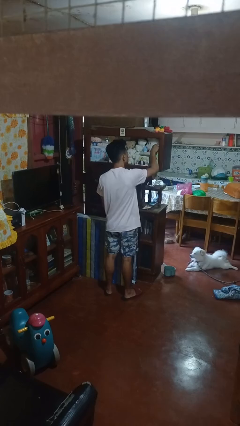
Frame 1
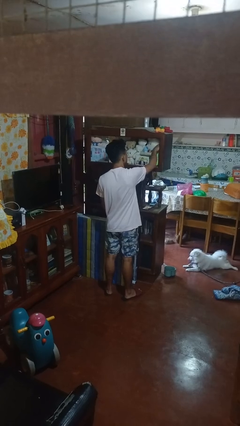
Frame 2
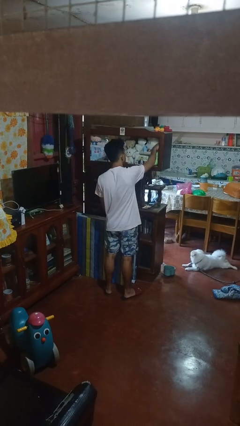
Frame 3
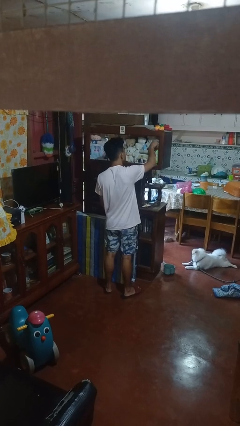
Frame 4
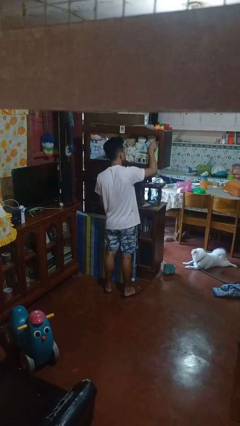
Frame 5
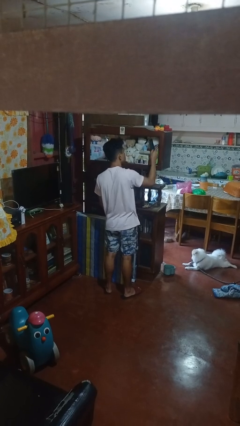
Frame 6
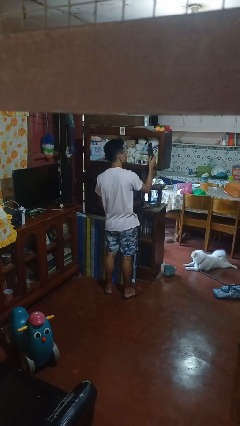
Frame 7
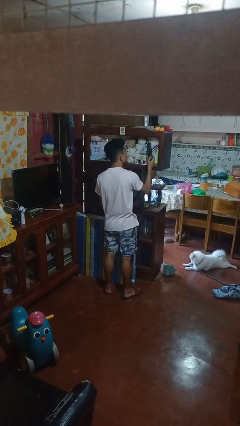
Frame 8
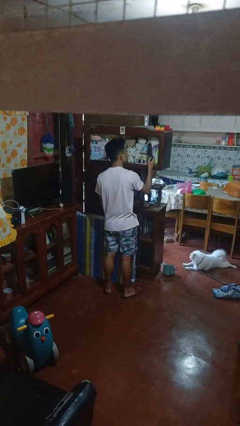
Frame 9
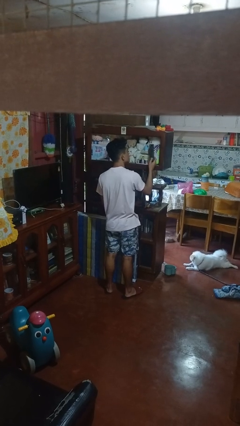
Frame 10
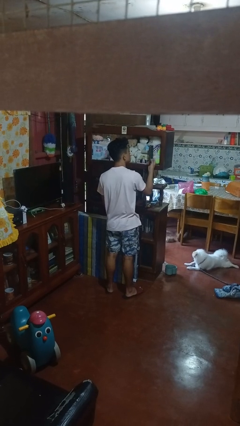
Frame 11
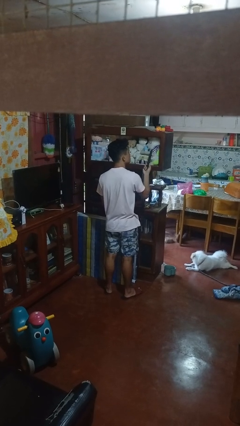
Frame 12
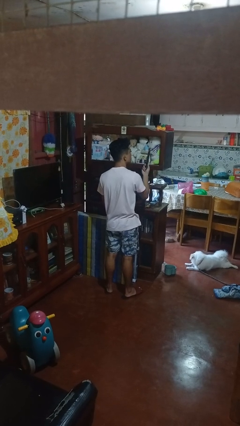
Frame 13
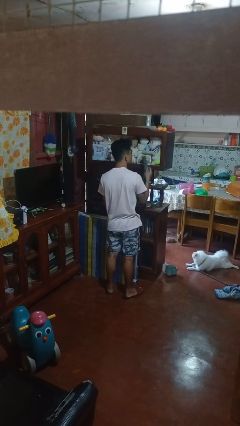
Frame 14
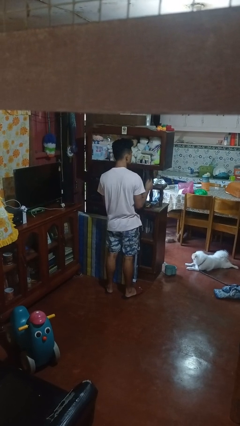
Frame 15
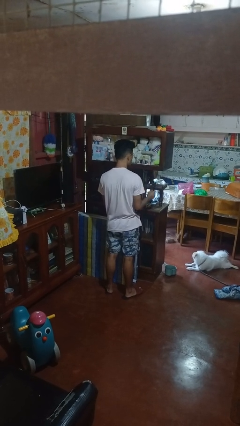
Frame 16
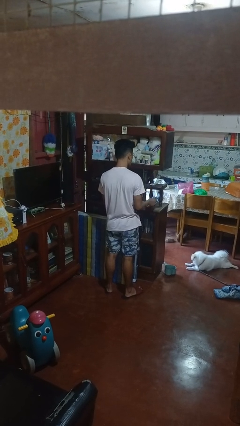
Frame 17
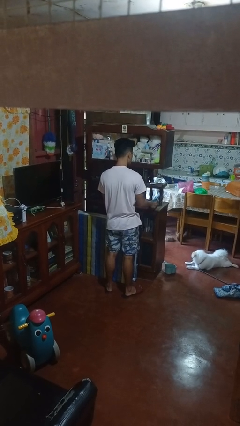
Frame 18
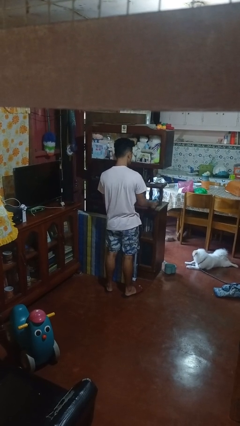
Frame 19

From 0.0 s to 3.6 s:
person picks up object from shelf

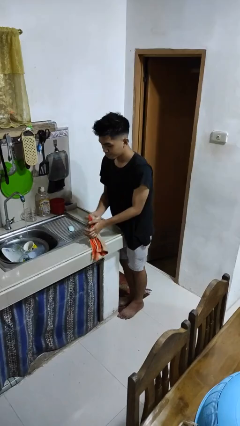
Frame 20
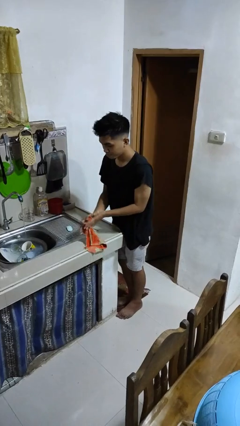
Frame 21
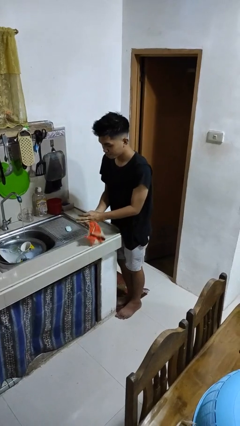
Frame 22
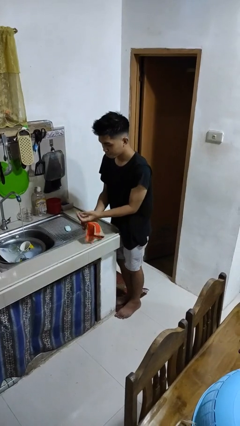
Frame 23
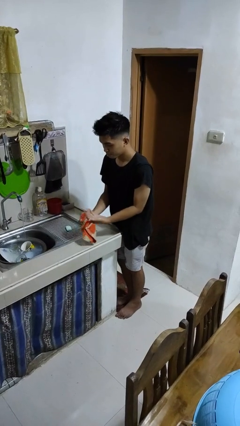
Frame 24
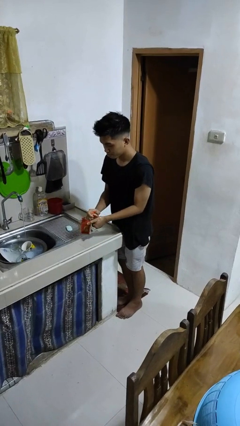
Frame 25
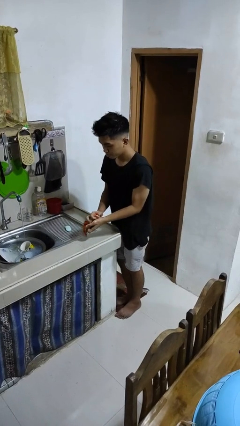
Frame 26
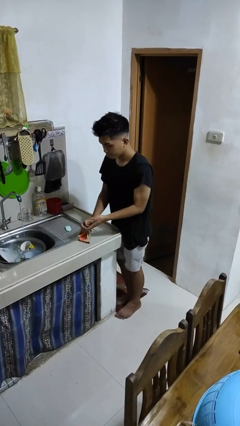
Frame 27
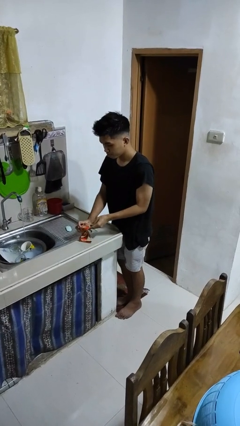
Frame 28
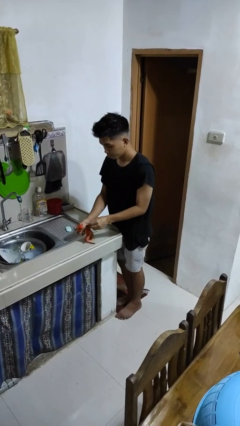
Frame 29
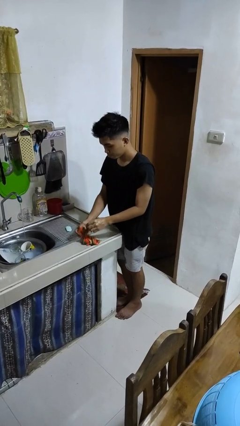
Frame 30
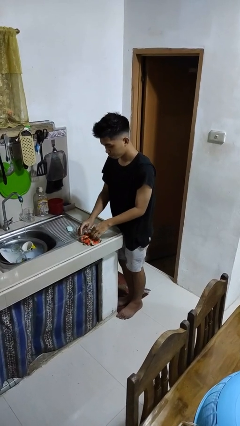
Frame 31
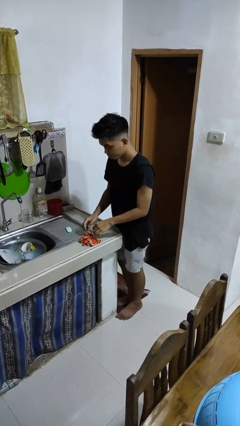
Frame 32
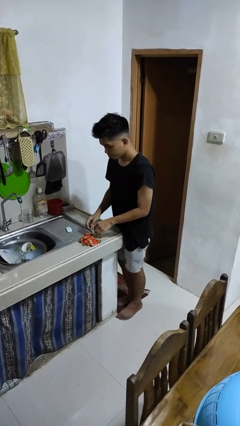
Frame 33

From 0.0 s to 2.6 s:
person dries hands with towel

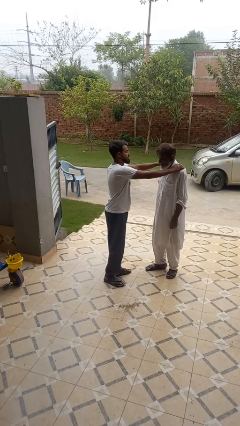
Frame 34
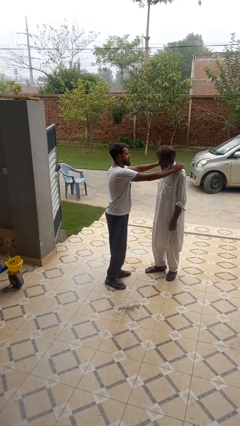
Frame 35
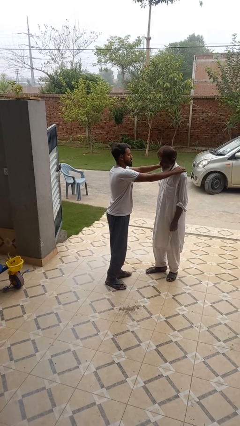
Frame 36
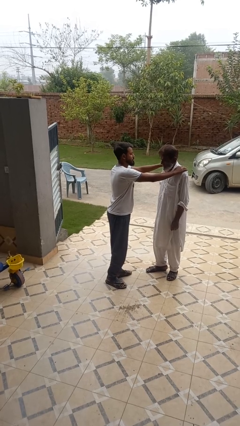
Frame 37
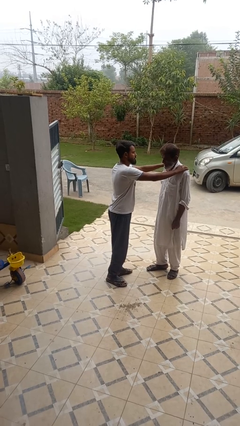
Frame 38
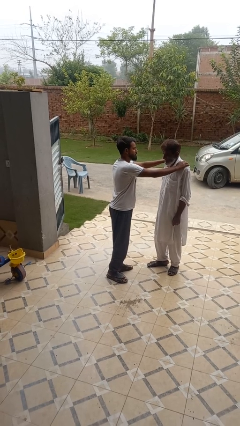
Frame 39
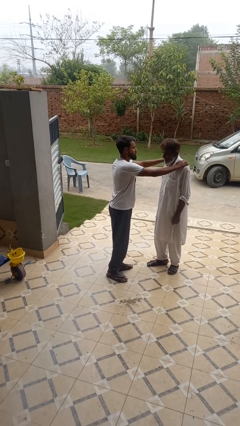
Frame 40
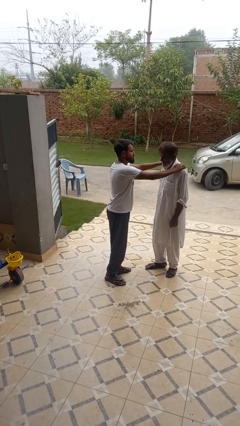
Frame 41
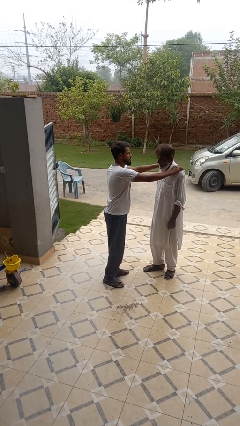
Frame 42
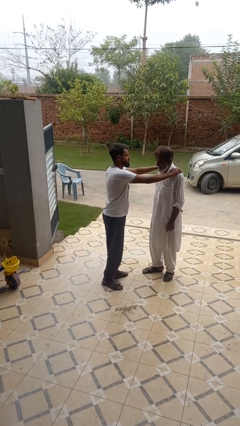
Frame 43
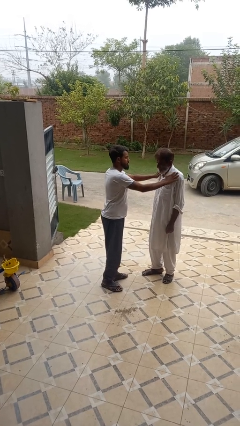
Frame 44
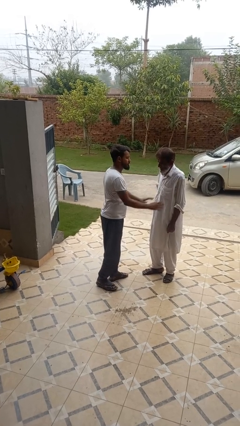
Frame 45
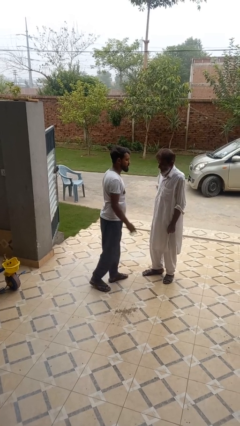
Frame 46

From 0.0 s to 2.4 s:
person pounds shoulders of person

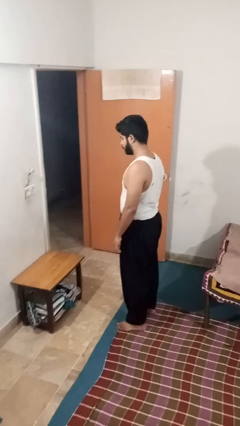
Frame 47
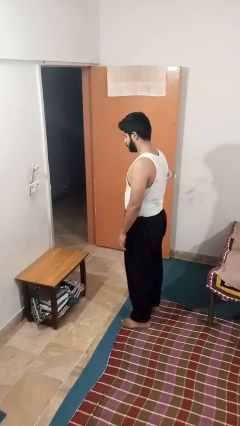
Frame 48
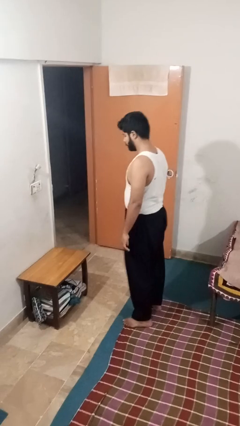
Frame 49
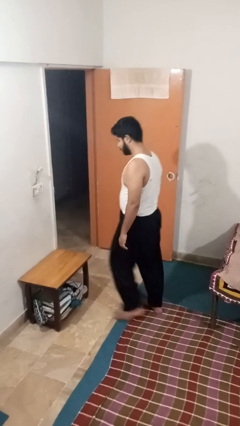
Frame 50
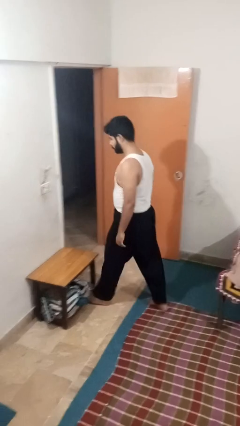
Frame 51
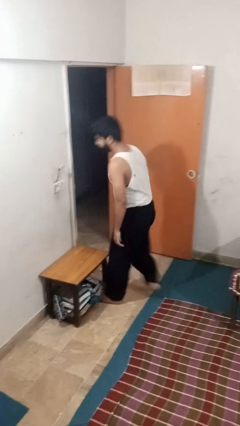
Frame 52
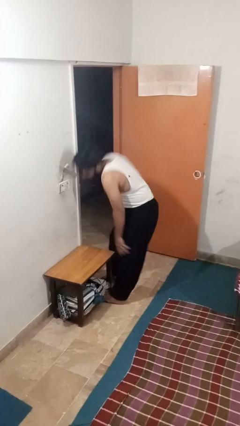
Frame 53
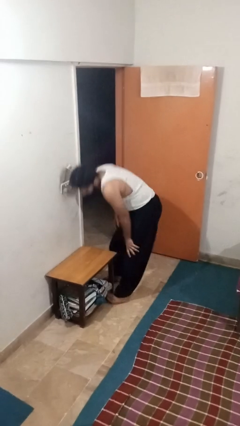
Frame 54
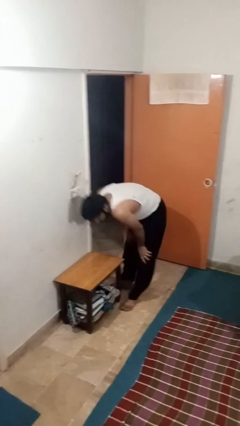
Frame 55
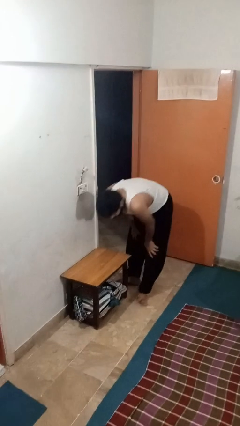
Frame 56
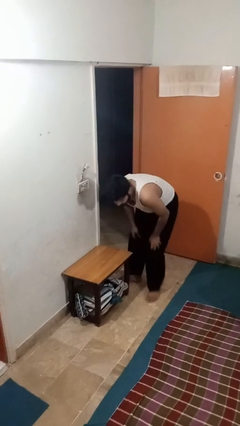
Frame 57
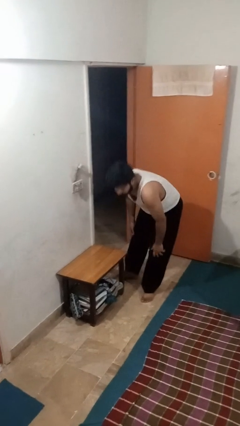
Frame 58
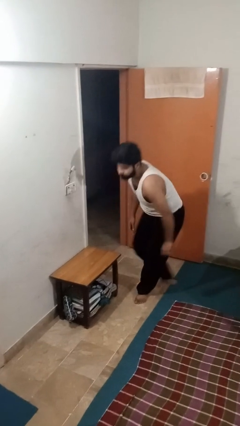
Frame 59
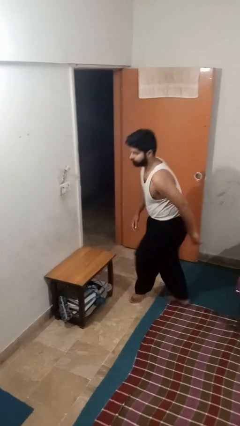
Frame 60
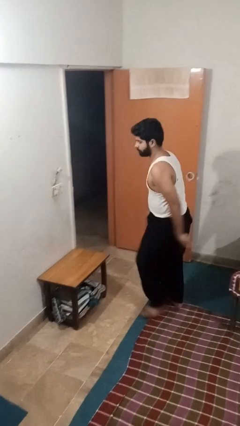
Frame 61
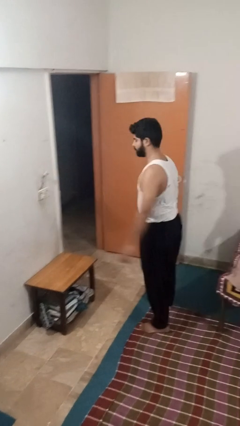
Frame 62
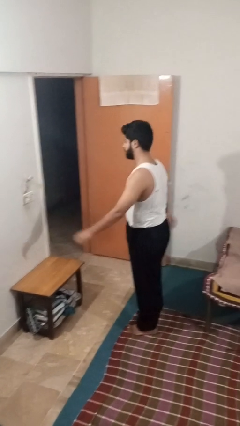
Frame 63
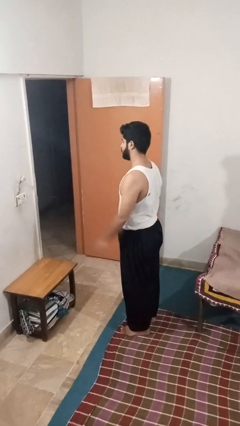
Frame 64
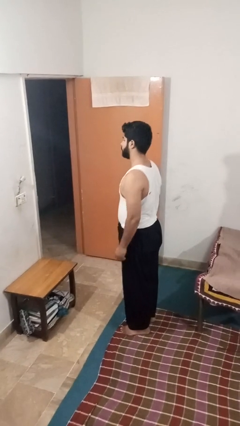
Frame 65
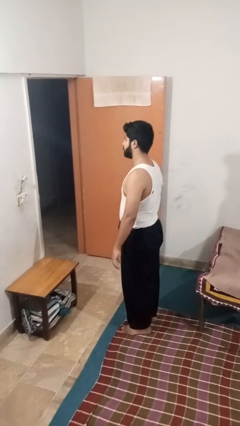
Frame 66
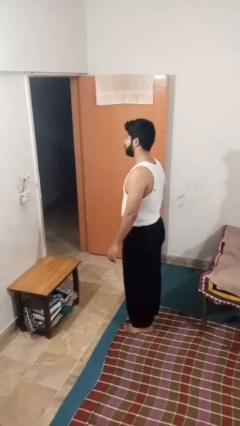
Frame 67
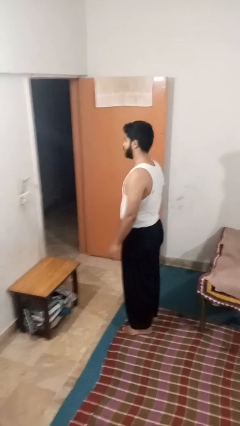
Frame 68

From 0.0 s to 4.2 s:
person bumps into table

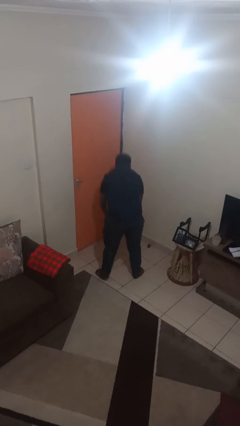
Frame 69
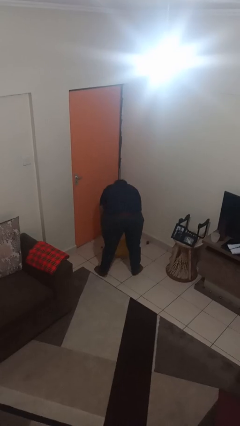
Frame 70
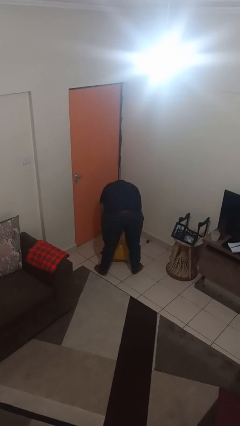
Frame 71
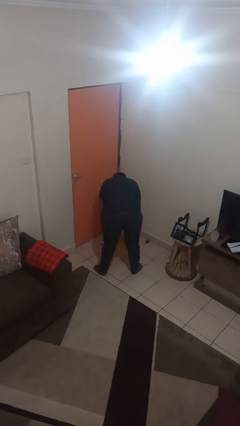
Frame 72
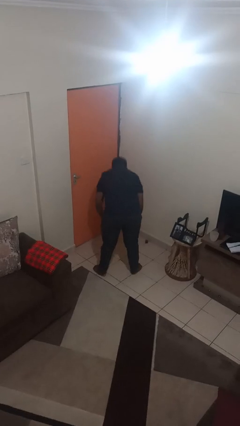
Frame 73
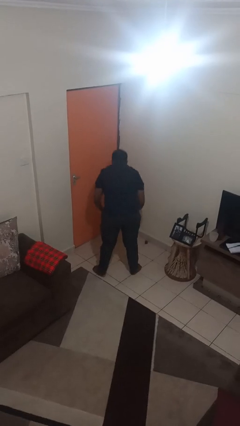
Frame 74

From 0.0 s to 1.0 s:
person catches dropped object

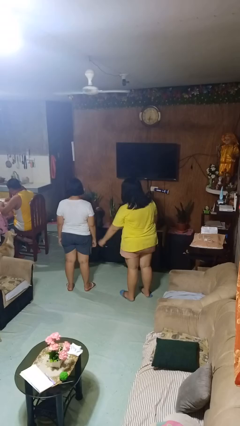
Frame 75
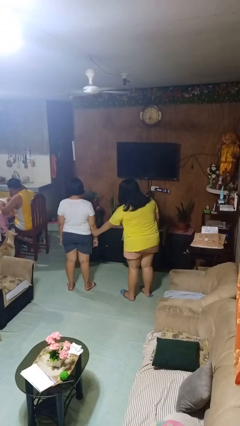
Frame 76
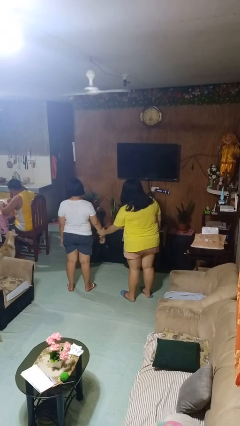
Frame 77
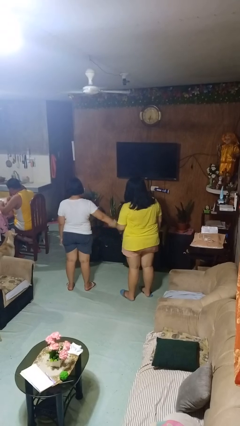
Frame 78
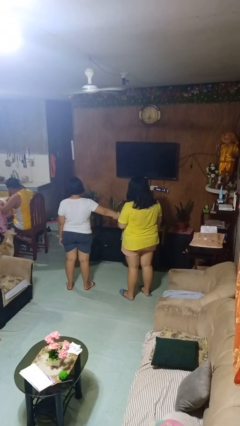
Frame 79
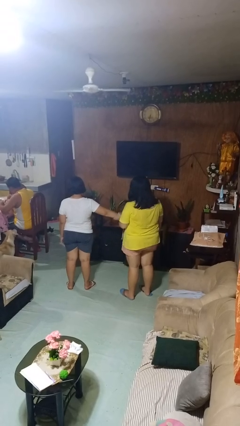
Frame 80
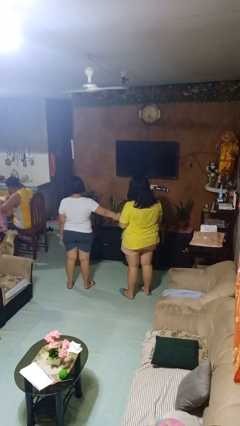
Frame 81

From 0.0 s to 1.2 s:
person grabs person by forearm

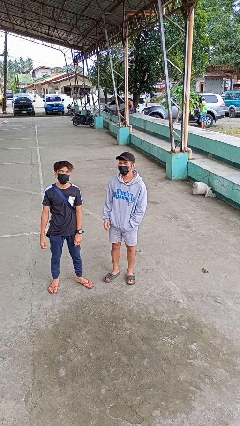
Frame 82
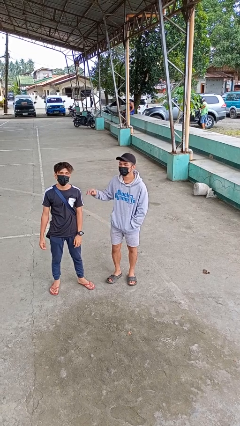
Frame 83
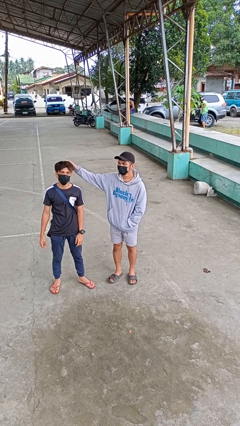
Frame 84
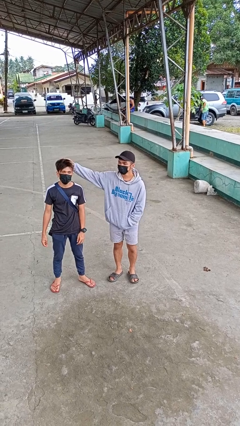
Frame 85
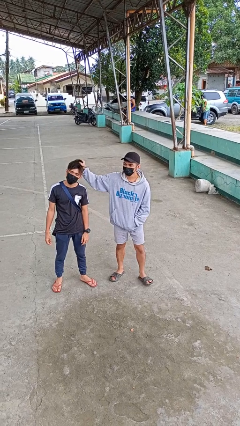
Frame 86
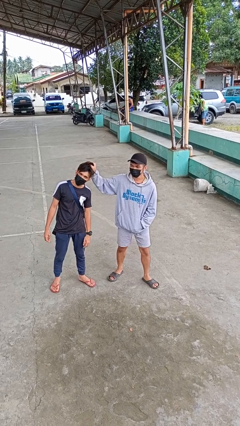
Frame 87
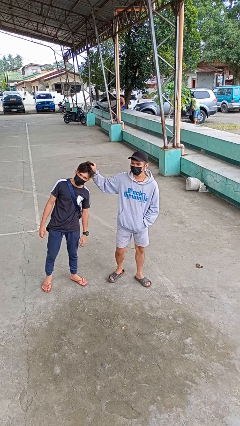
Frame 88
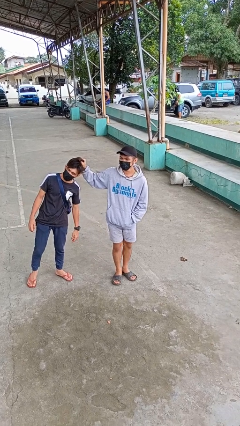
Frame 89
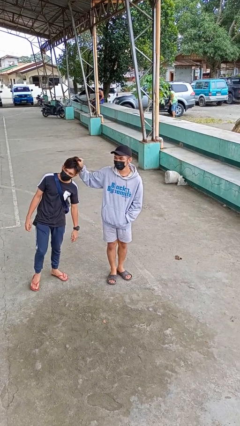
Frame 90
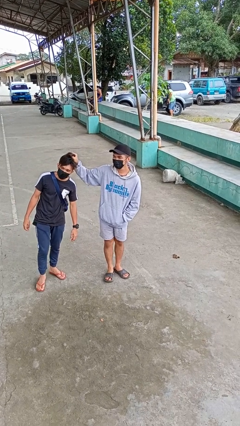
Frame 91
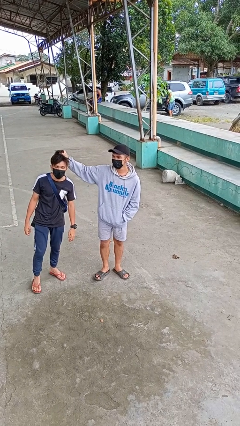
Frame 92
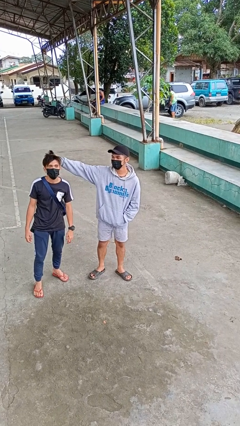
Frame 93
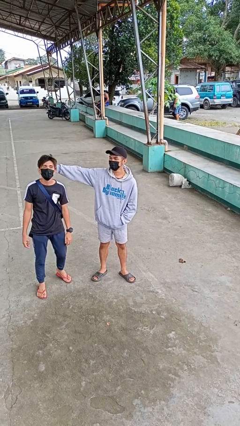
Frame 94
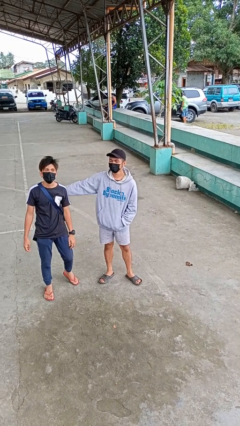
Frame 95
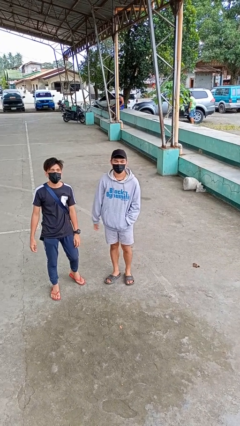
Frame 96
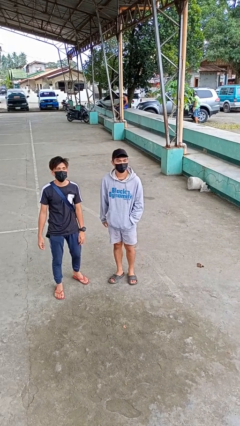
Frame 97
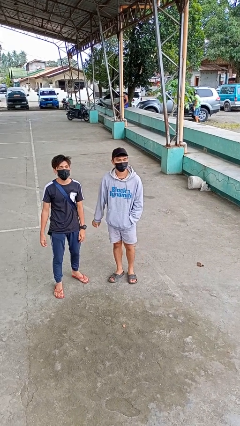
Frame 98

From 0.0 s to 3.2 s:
person grabs person by hair
